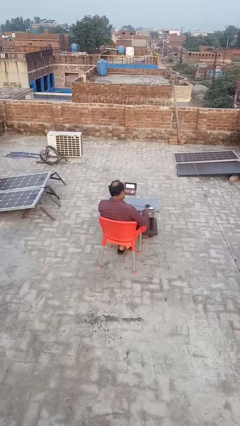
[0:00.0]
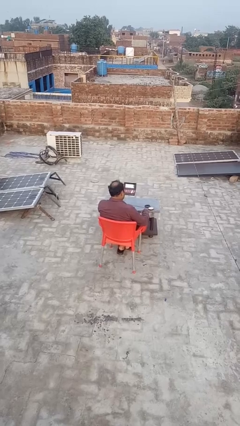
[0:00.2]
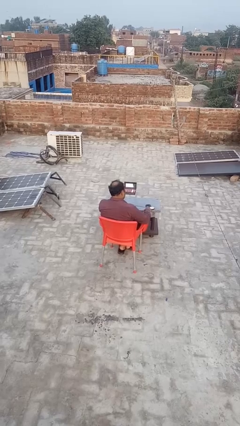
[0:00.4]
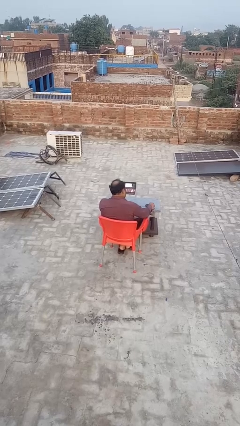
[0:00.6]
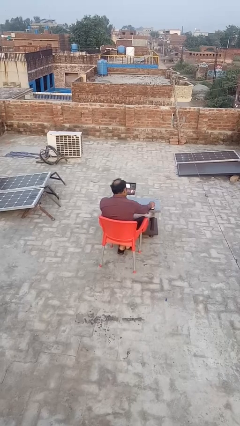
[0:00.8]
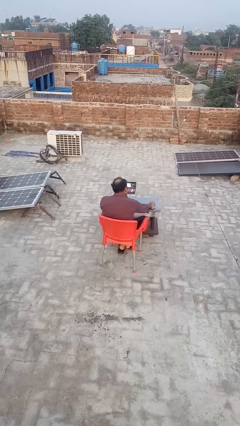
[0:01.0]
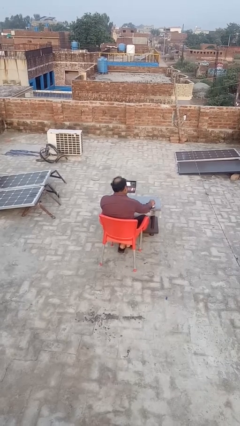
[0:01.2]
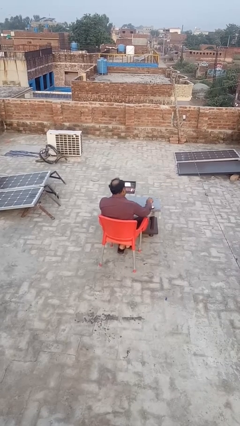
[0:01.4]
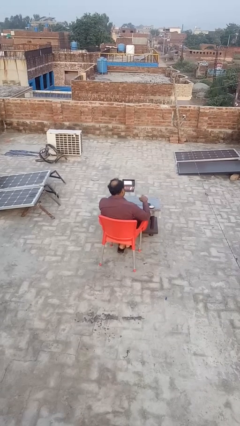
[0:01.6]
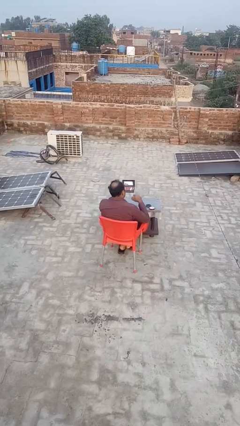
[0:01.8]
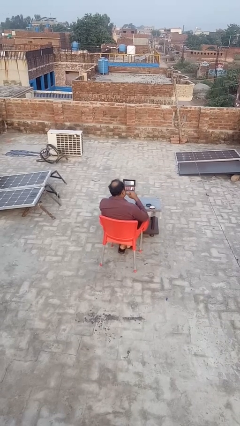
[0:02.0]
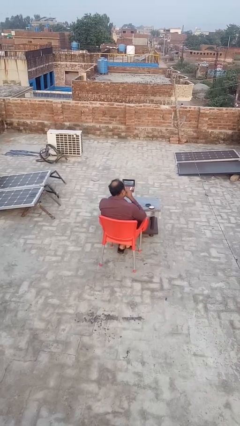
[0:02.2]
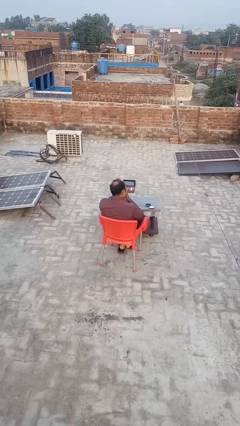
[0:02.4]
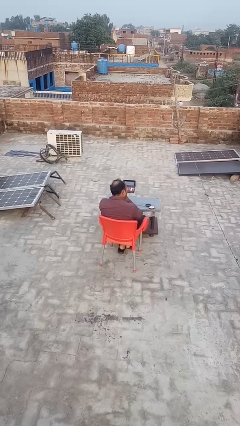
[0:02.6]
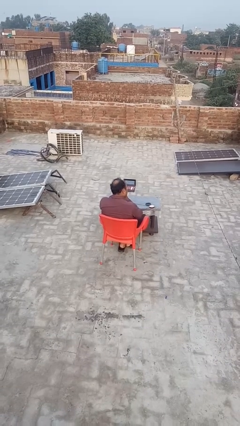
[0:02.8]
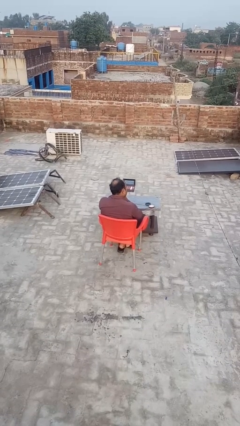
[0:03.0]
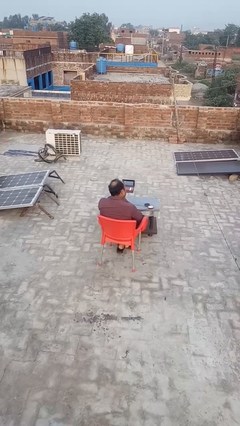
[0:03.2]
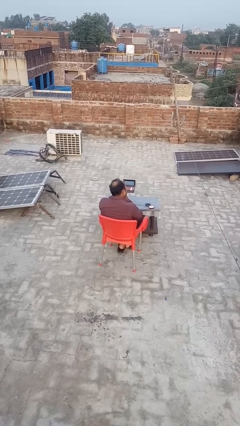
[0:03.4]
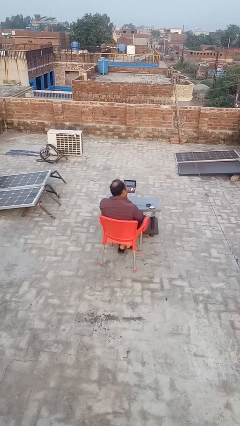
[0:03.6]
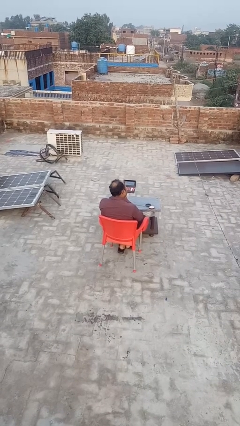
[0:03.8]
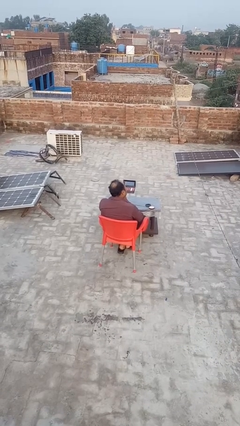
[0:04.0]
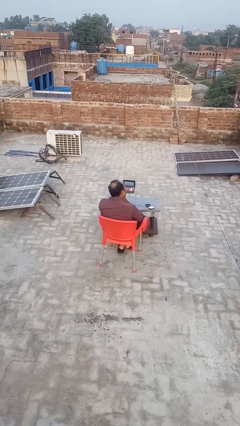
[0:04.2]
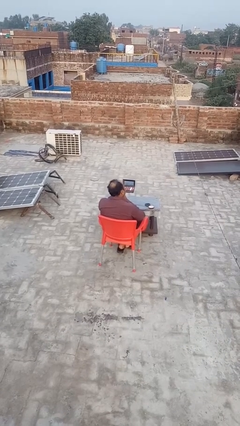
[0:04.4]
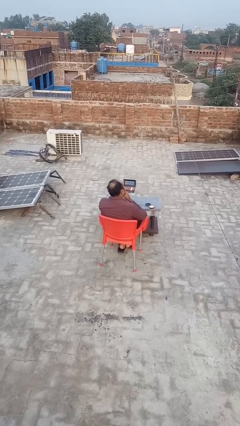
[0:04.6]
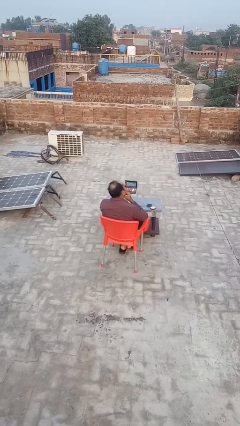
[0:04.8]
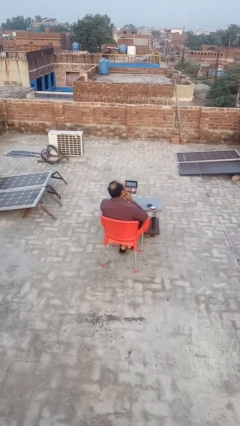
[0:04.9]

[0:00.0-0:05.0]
person applies foundation makeup

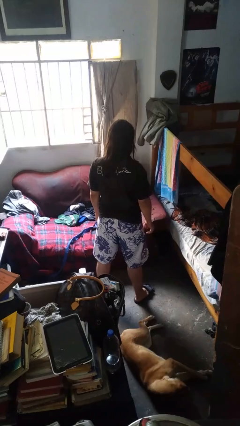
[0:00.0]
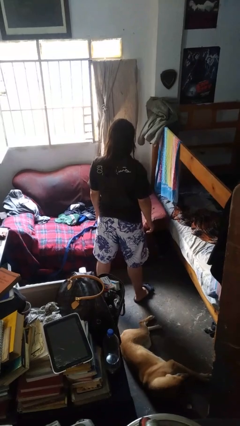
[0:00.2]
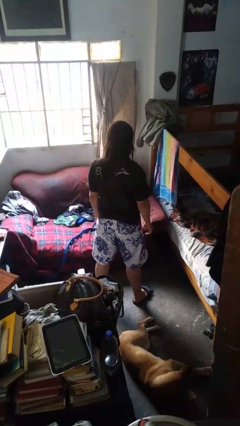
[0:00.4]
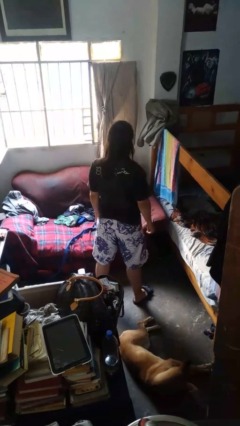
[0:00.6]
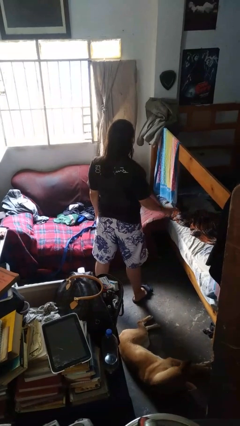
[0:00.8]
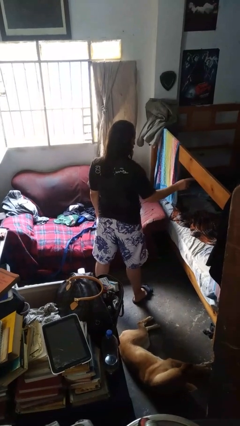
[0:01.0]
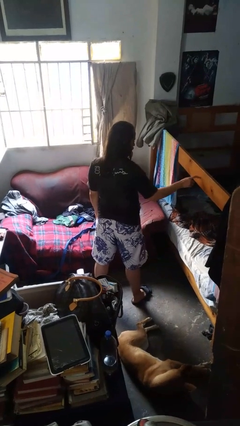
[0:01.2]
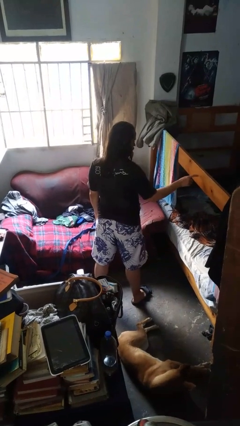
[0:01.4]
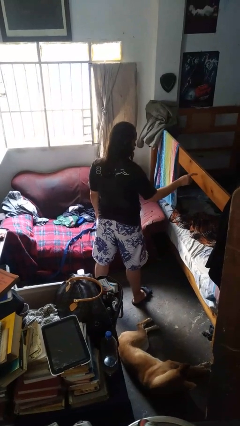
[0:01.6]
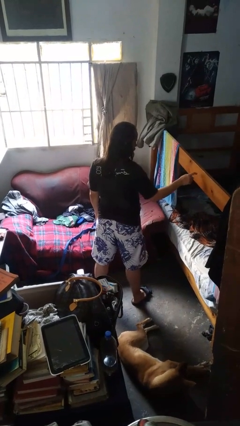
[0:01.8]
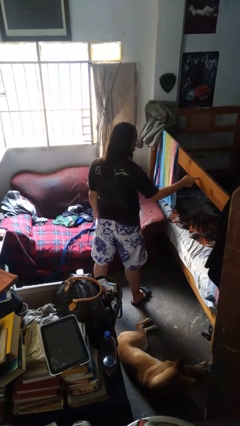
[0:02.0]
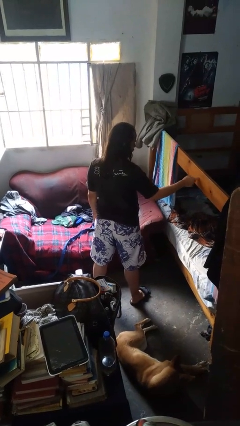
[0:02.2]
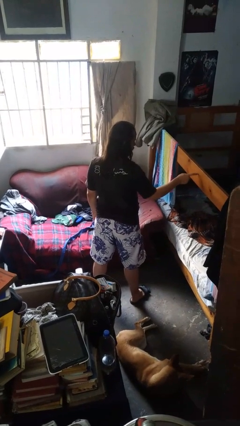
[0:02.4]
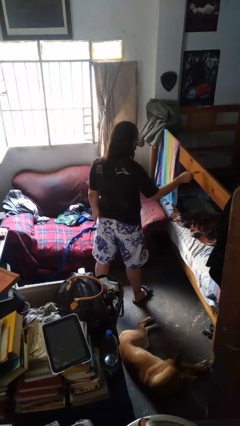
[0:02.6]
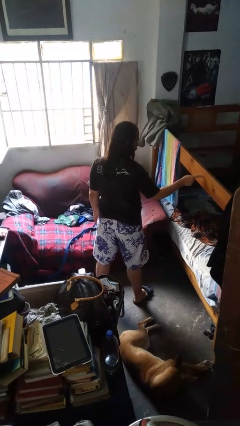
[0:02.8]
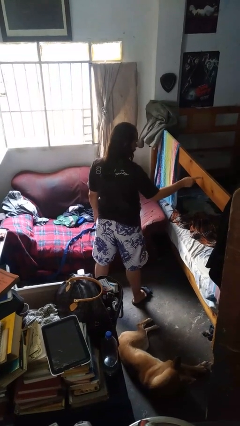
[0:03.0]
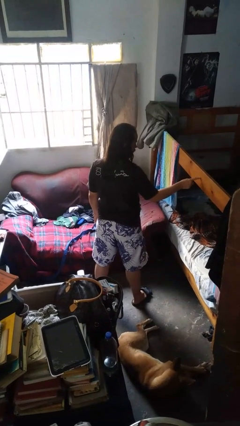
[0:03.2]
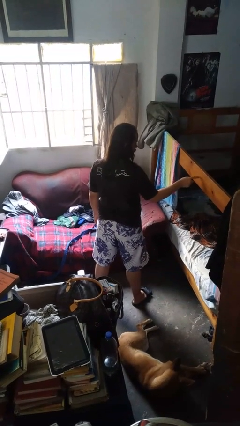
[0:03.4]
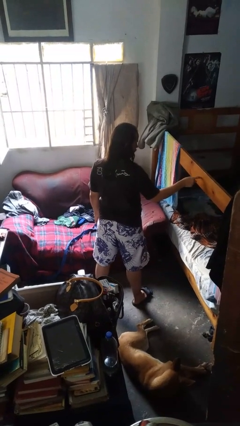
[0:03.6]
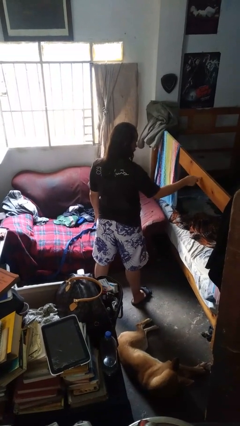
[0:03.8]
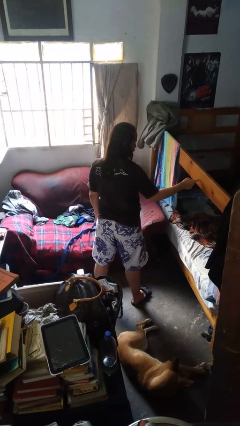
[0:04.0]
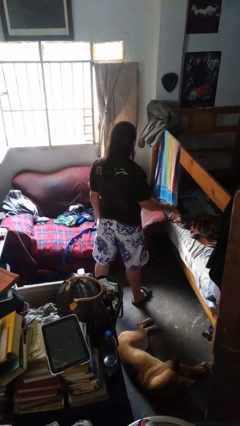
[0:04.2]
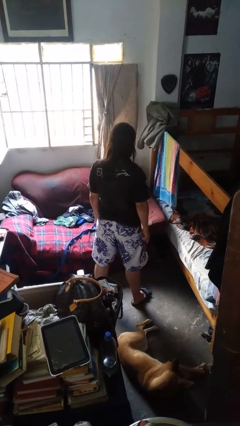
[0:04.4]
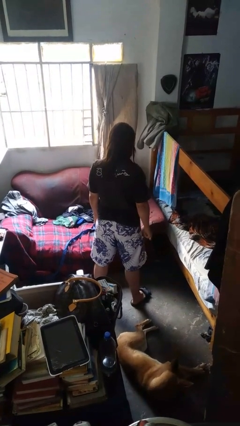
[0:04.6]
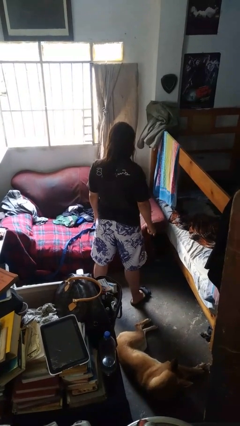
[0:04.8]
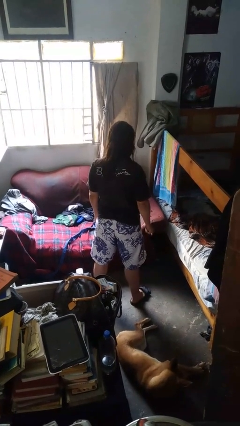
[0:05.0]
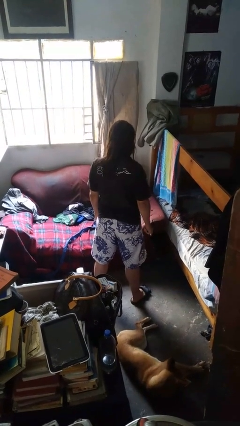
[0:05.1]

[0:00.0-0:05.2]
person taps object with finger

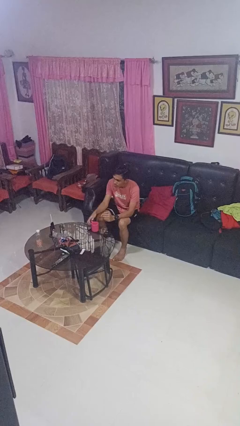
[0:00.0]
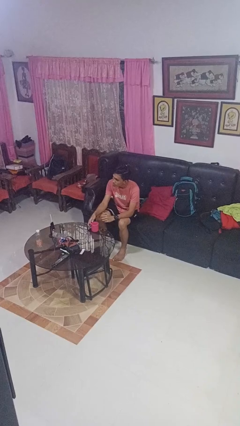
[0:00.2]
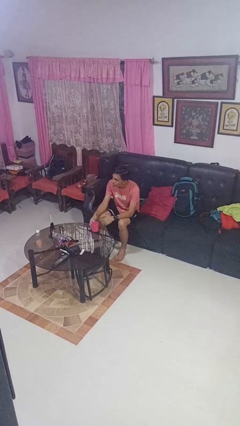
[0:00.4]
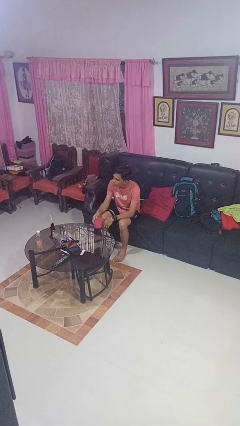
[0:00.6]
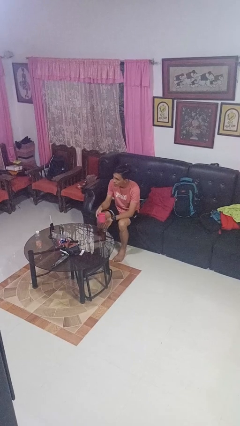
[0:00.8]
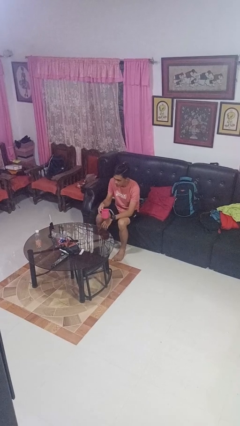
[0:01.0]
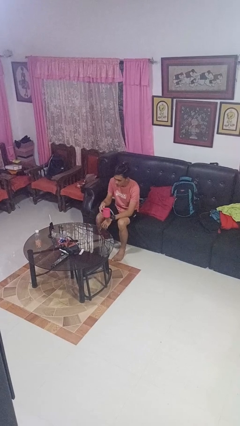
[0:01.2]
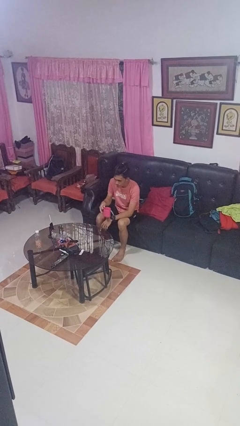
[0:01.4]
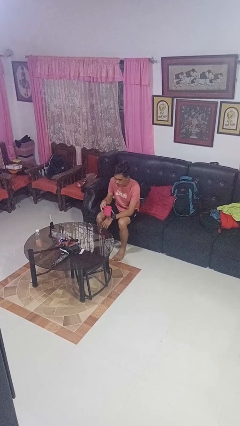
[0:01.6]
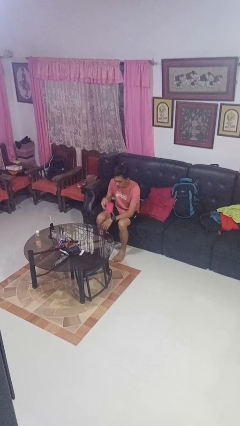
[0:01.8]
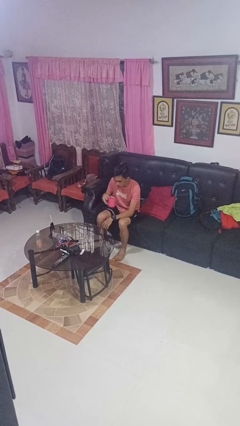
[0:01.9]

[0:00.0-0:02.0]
person picks up object from table

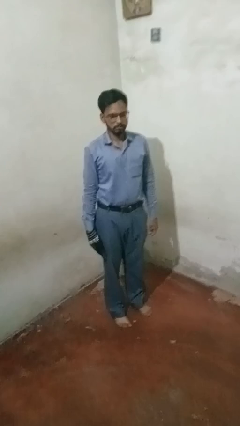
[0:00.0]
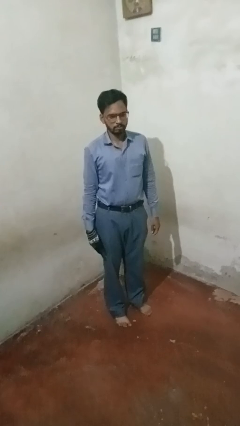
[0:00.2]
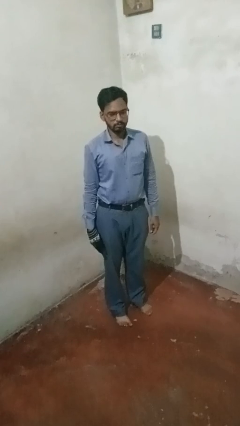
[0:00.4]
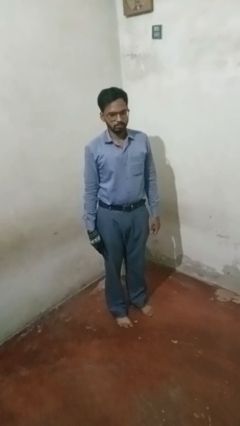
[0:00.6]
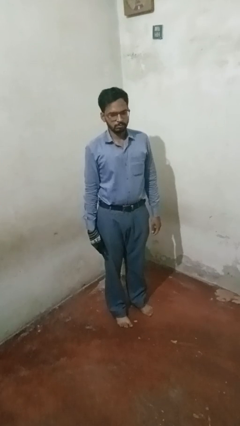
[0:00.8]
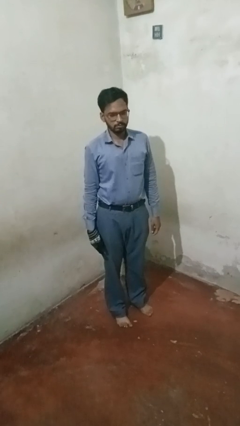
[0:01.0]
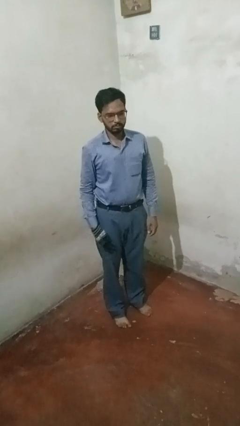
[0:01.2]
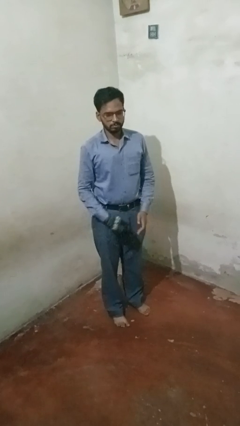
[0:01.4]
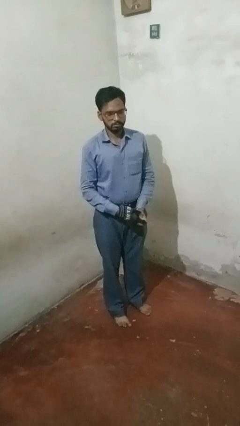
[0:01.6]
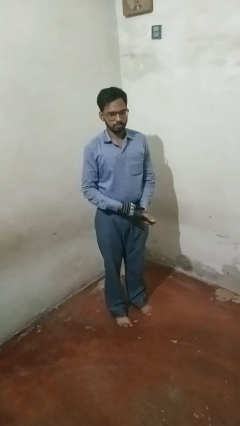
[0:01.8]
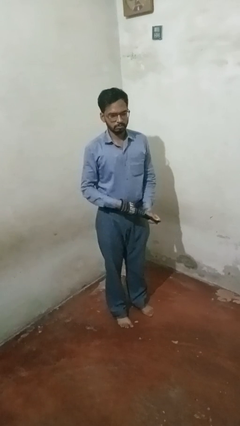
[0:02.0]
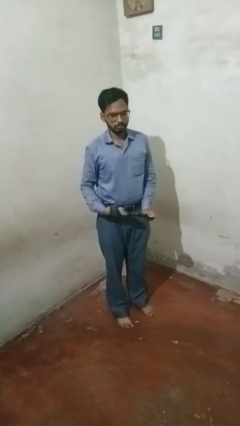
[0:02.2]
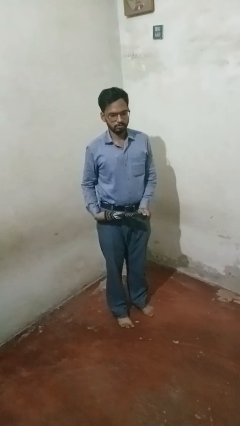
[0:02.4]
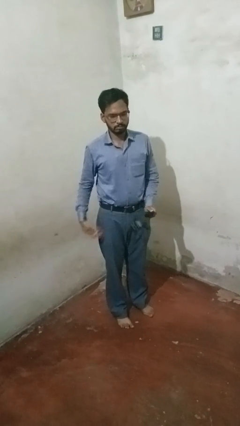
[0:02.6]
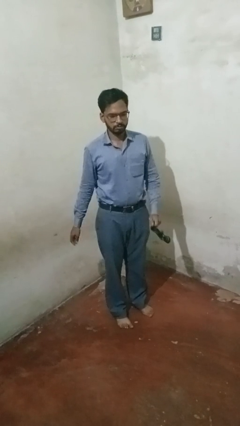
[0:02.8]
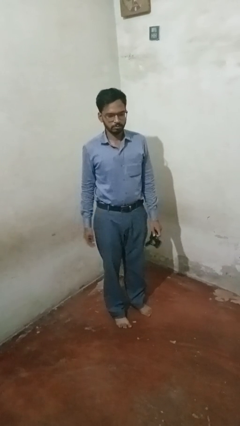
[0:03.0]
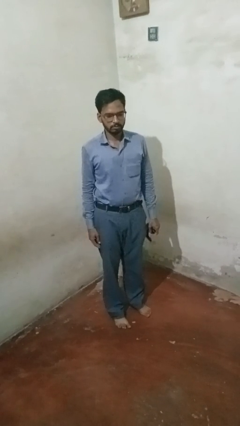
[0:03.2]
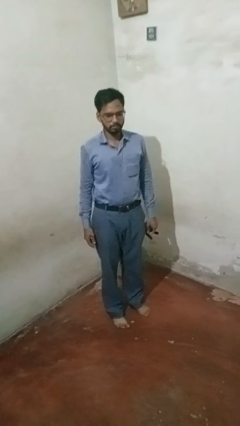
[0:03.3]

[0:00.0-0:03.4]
person takes off gloves

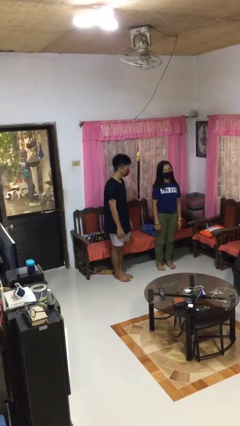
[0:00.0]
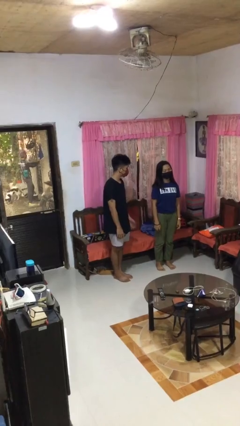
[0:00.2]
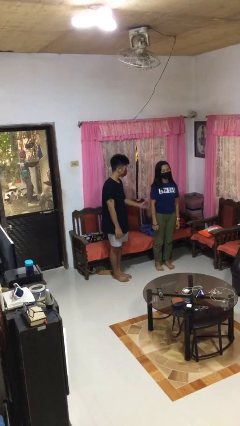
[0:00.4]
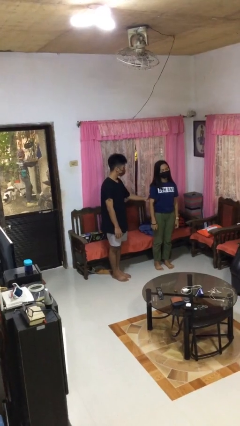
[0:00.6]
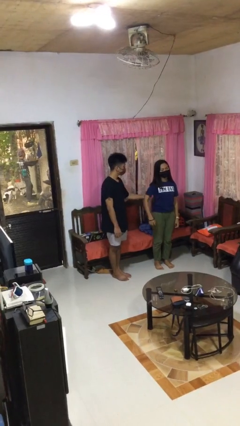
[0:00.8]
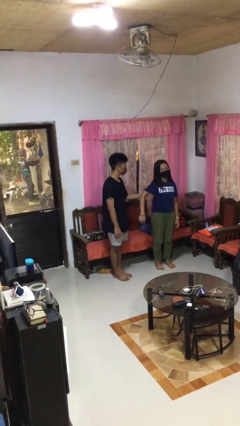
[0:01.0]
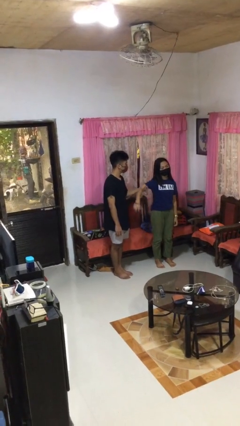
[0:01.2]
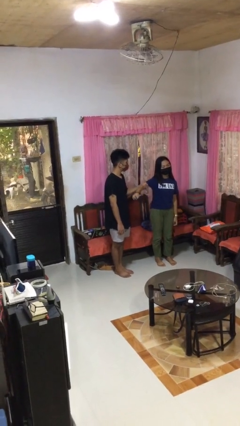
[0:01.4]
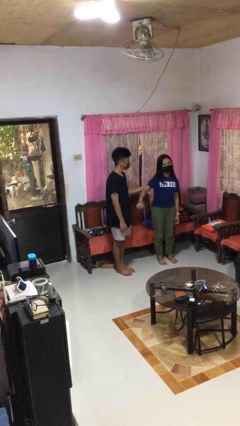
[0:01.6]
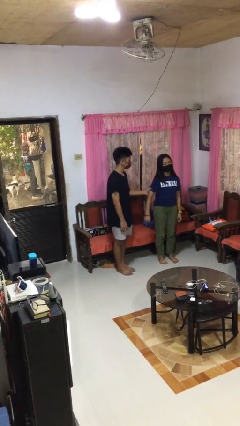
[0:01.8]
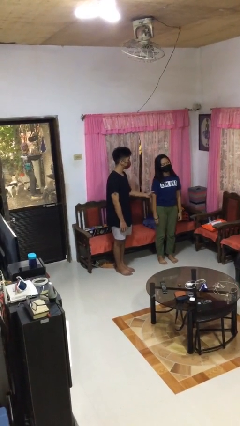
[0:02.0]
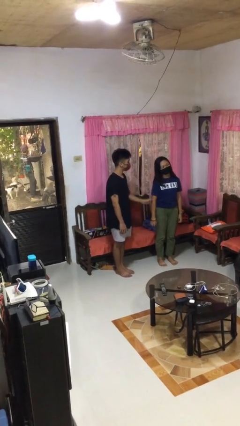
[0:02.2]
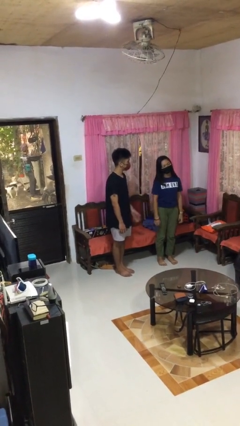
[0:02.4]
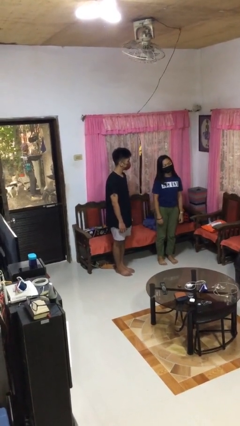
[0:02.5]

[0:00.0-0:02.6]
person grabs person by bicep
